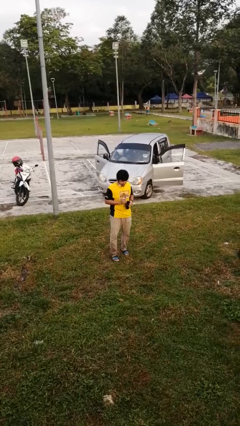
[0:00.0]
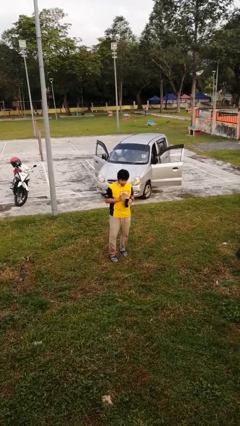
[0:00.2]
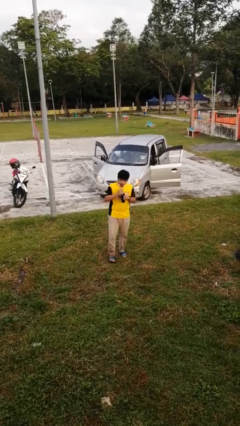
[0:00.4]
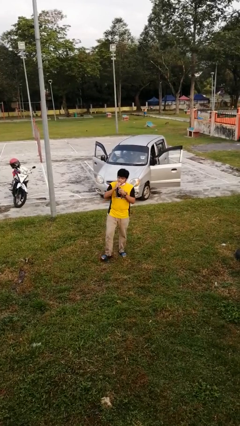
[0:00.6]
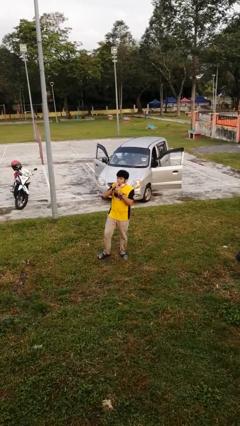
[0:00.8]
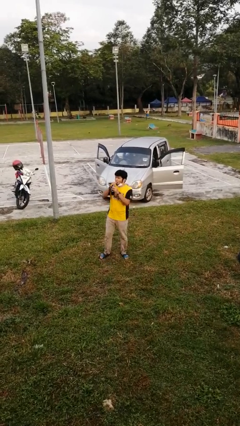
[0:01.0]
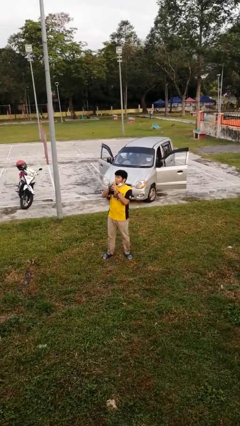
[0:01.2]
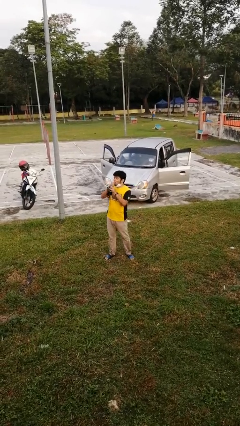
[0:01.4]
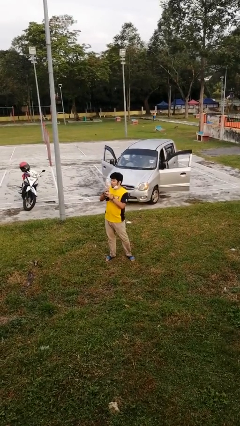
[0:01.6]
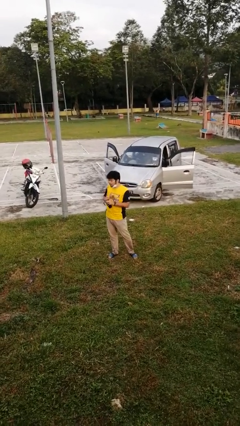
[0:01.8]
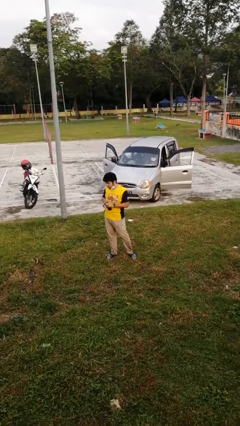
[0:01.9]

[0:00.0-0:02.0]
person drinks from straw

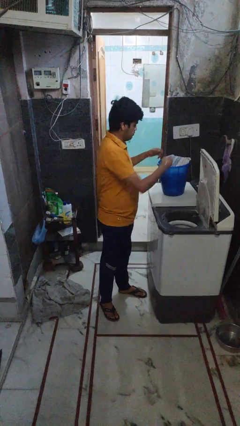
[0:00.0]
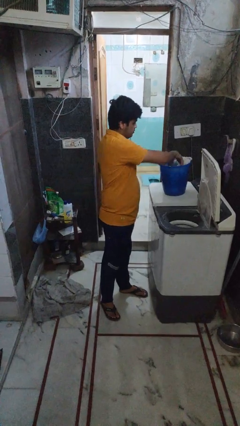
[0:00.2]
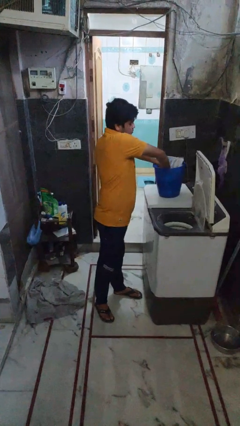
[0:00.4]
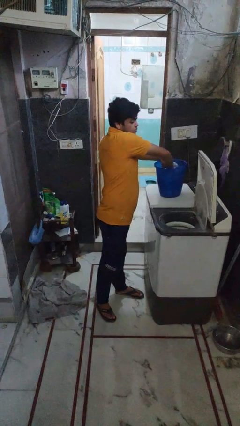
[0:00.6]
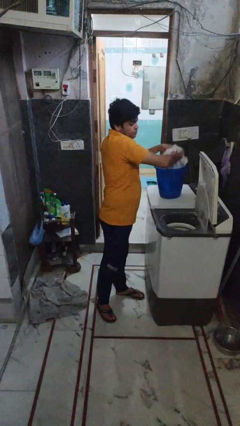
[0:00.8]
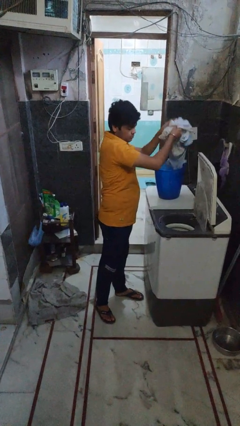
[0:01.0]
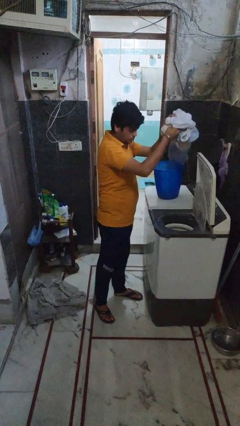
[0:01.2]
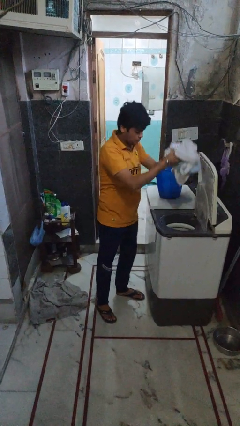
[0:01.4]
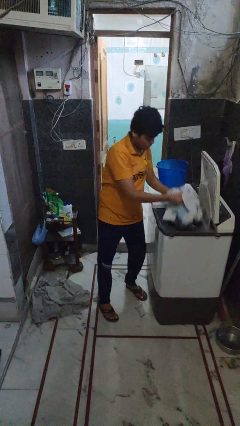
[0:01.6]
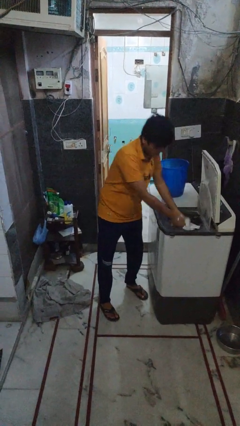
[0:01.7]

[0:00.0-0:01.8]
person loads clotheswasher

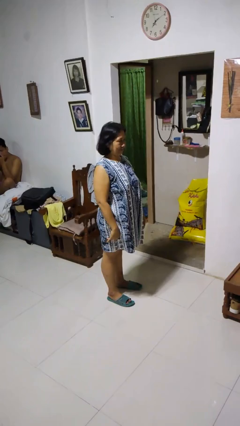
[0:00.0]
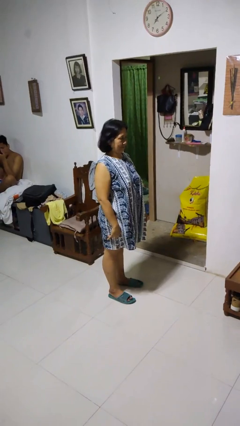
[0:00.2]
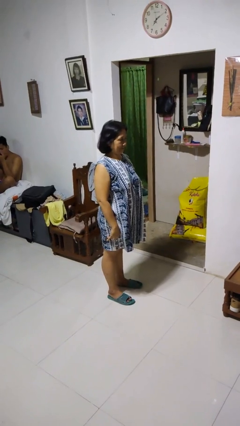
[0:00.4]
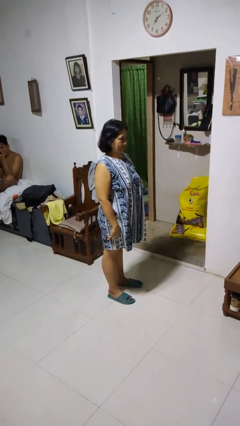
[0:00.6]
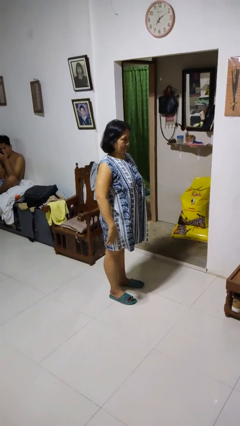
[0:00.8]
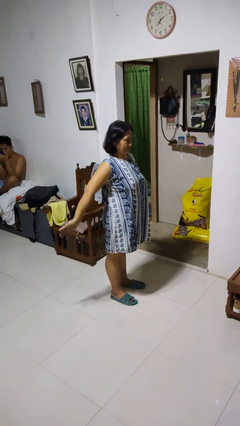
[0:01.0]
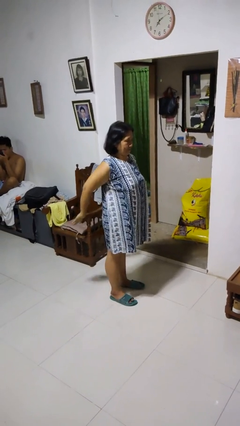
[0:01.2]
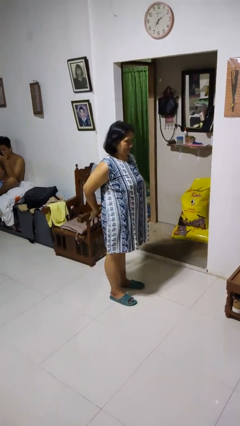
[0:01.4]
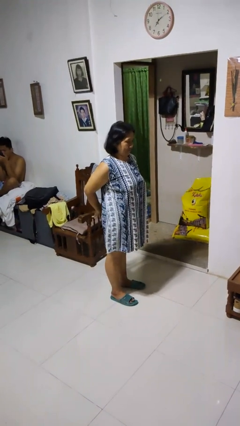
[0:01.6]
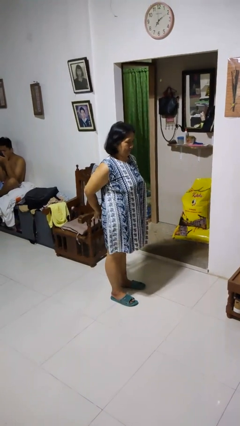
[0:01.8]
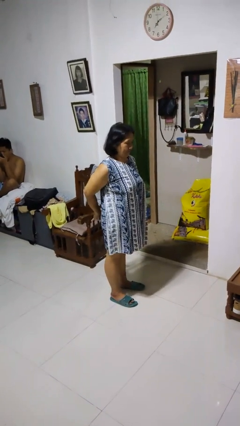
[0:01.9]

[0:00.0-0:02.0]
person stretches back

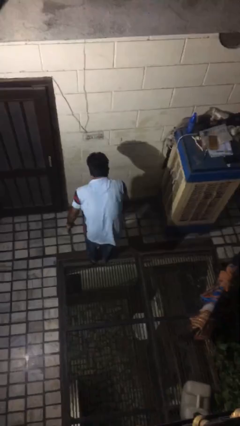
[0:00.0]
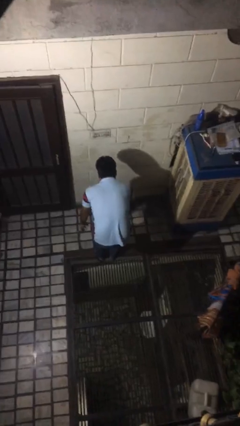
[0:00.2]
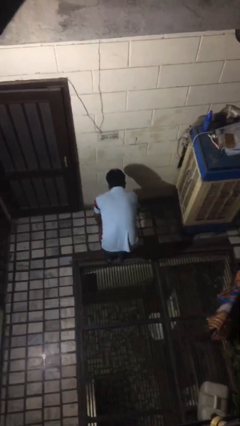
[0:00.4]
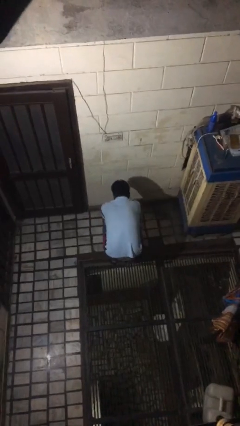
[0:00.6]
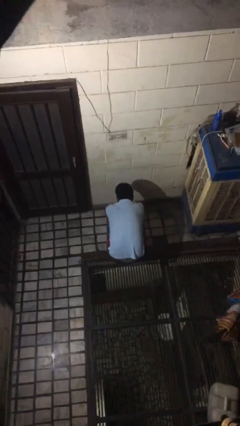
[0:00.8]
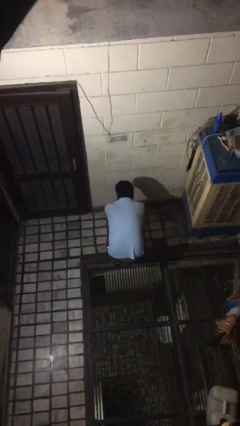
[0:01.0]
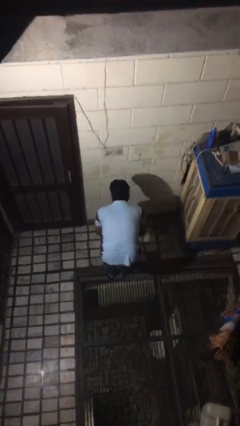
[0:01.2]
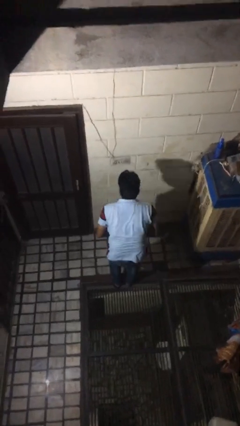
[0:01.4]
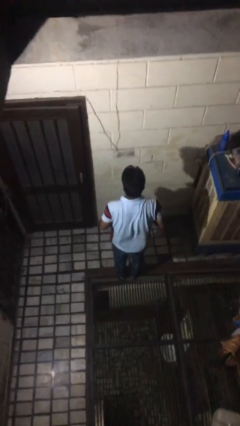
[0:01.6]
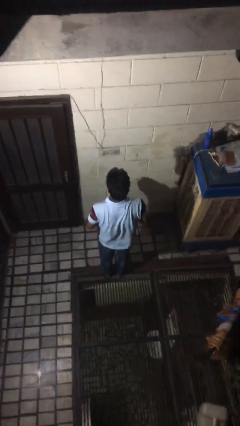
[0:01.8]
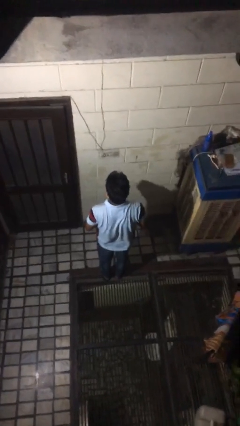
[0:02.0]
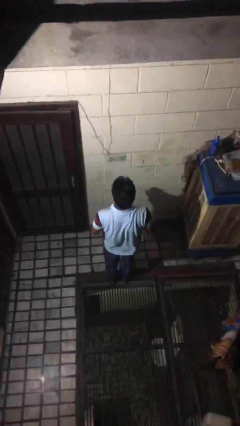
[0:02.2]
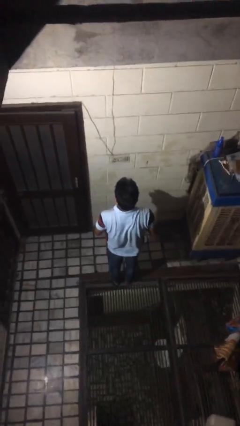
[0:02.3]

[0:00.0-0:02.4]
person picks up object from floor

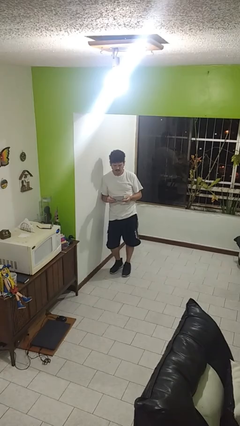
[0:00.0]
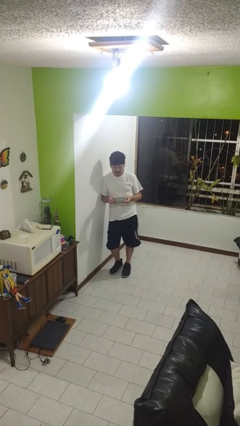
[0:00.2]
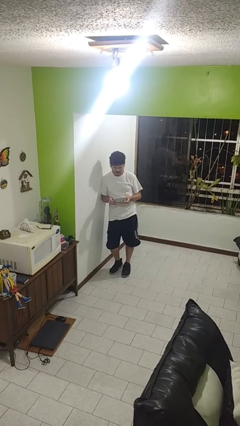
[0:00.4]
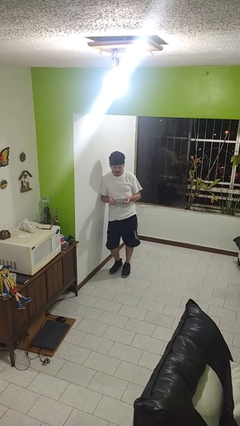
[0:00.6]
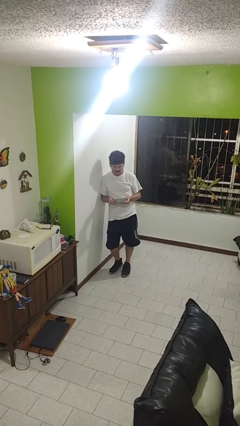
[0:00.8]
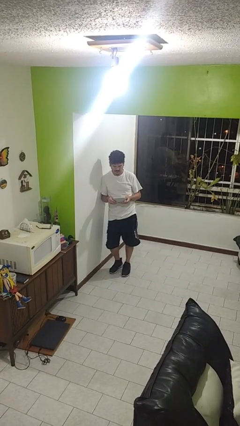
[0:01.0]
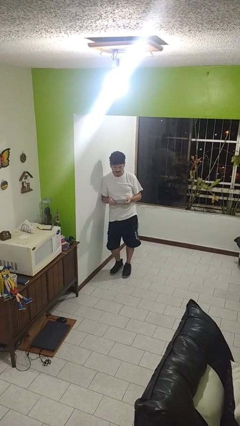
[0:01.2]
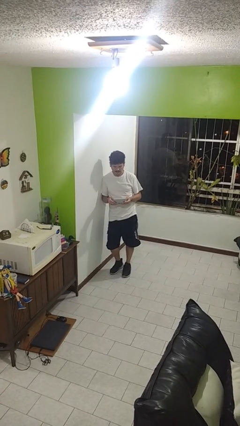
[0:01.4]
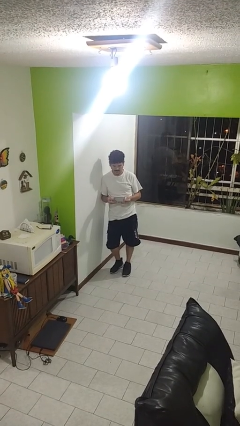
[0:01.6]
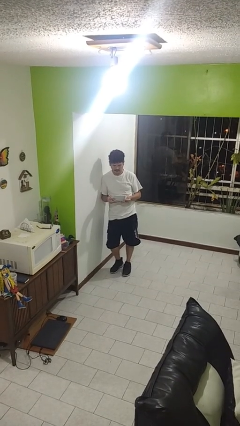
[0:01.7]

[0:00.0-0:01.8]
person interacts with handheld game

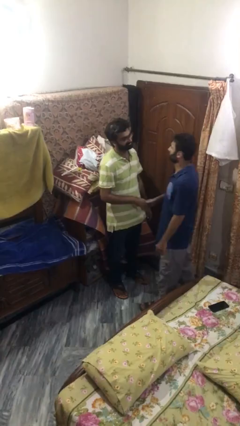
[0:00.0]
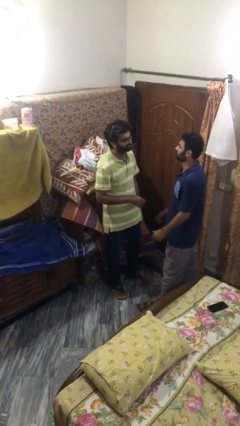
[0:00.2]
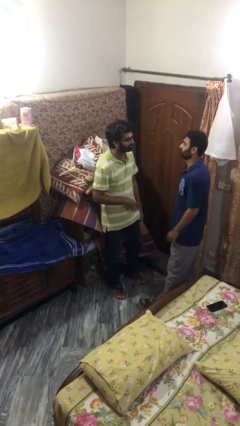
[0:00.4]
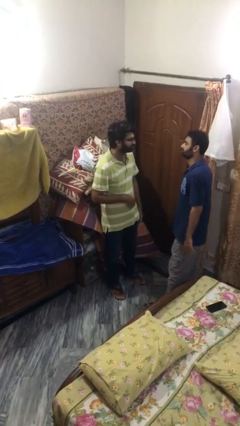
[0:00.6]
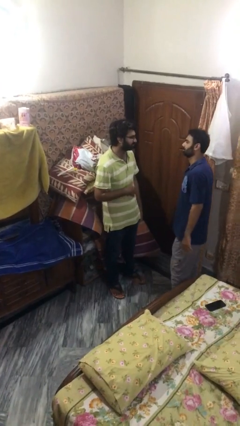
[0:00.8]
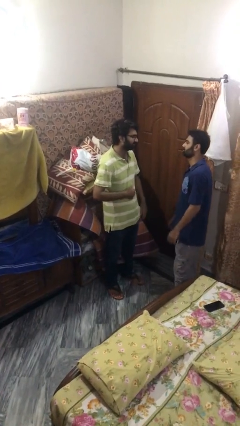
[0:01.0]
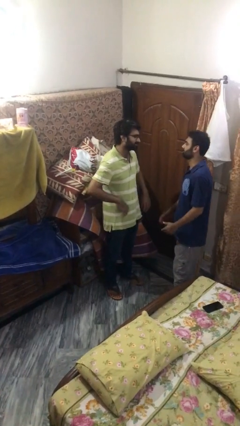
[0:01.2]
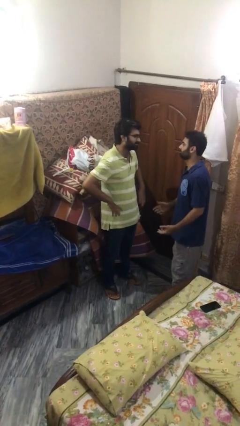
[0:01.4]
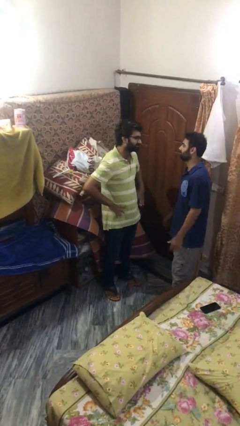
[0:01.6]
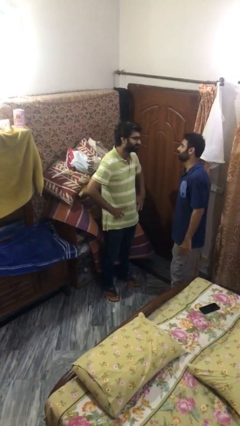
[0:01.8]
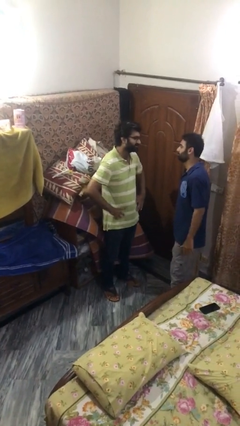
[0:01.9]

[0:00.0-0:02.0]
person talks to person

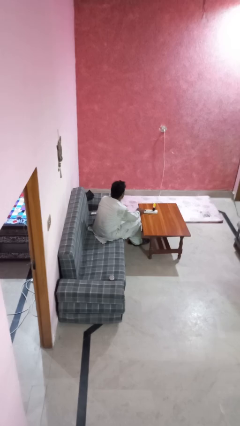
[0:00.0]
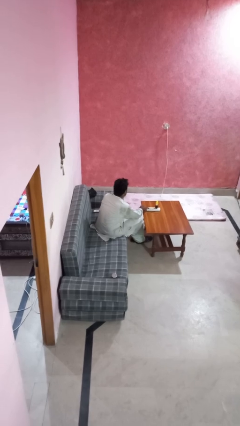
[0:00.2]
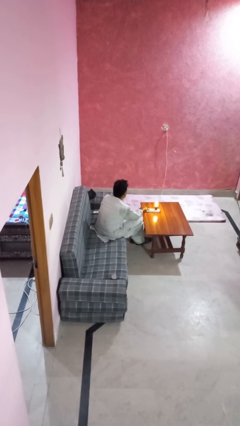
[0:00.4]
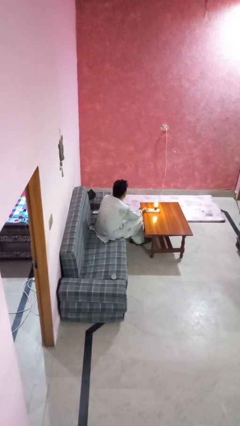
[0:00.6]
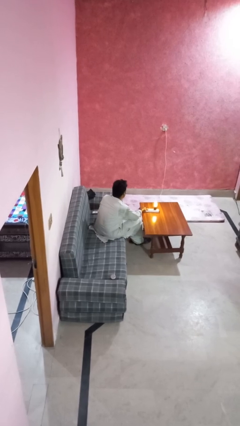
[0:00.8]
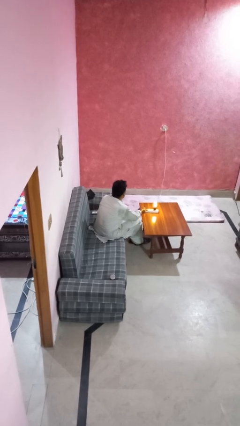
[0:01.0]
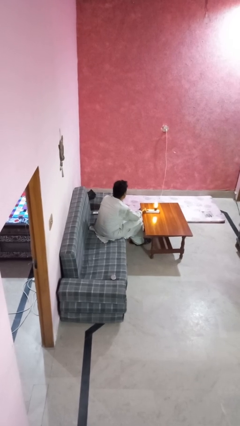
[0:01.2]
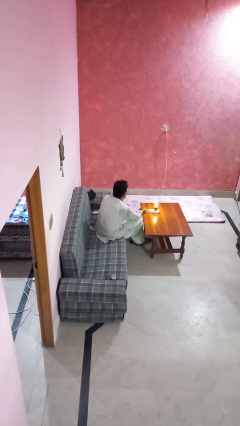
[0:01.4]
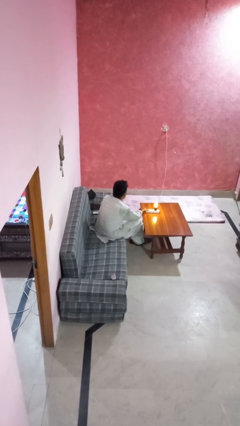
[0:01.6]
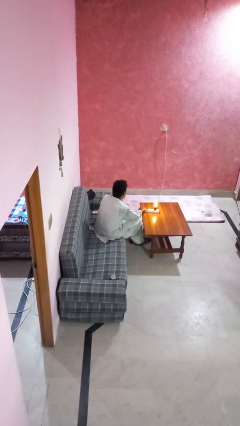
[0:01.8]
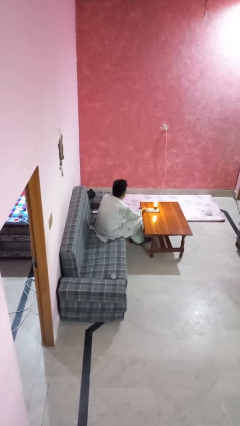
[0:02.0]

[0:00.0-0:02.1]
person turns on lamp

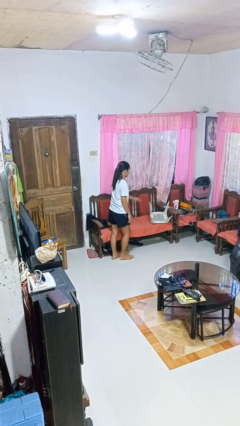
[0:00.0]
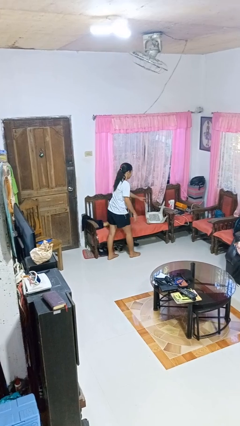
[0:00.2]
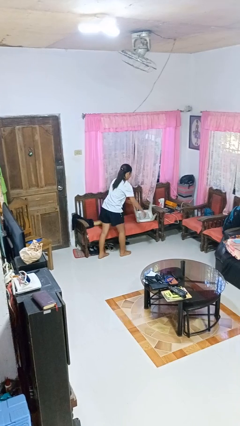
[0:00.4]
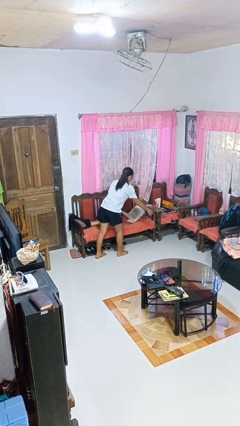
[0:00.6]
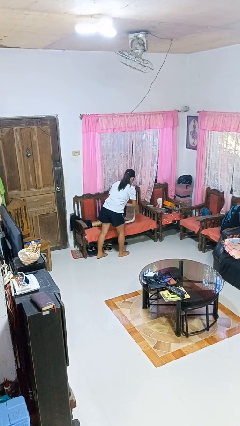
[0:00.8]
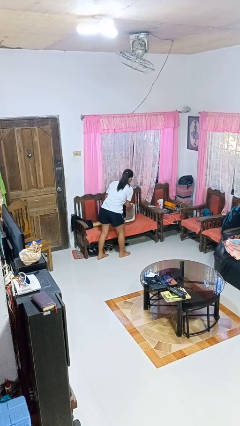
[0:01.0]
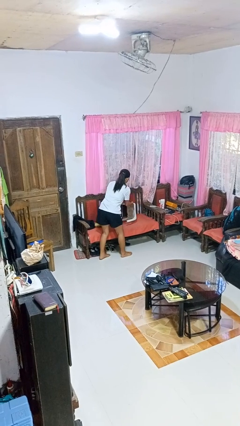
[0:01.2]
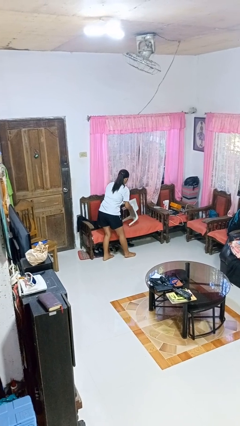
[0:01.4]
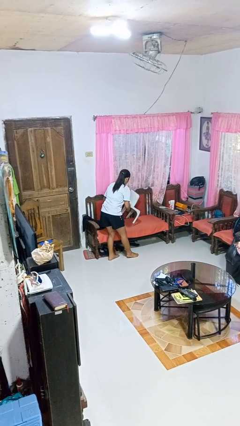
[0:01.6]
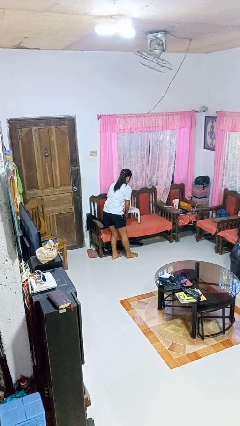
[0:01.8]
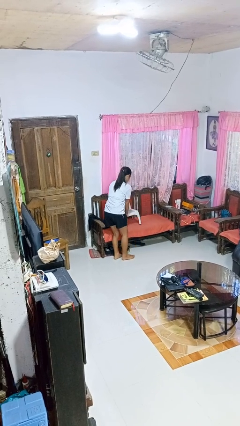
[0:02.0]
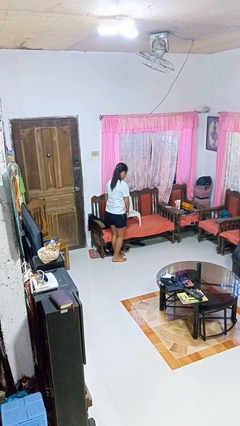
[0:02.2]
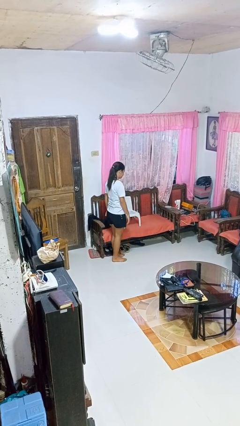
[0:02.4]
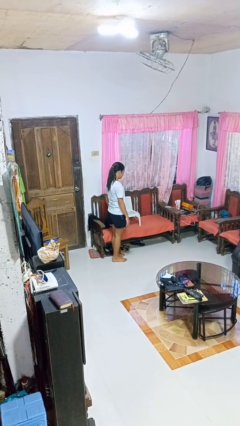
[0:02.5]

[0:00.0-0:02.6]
person sets upright furniture
